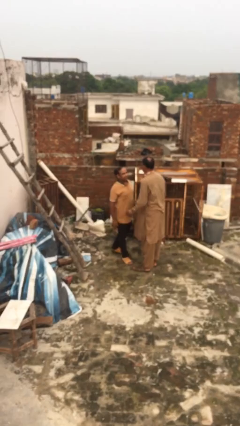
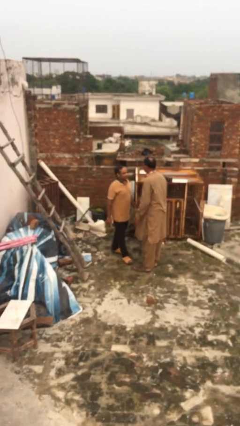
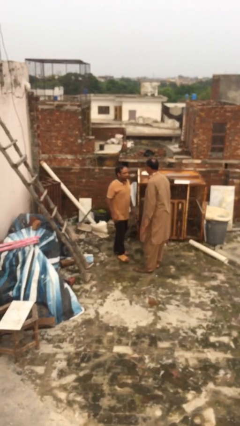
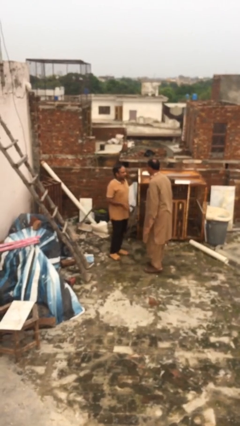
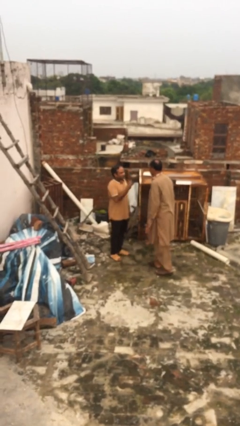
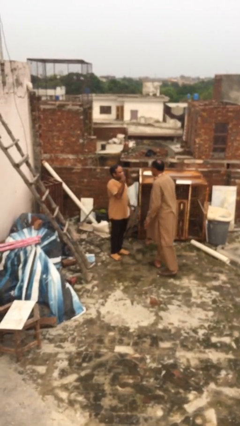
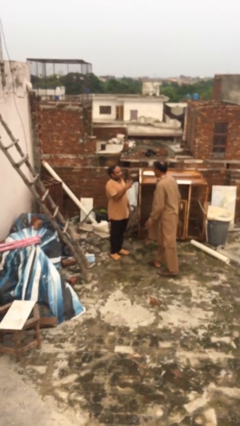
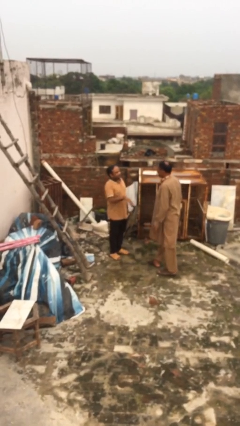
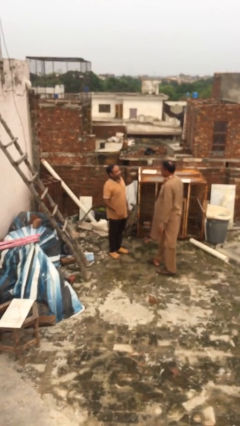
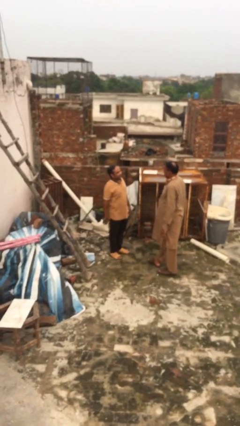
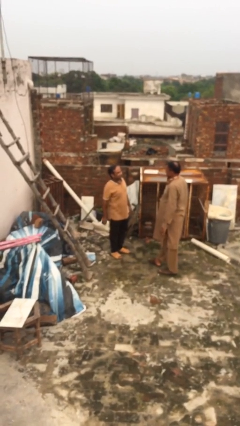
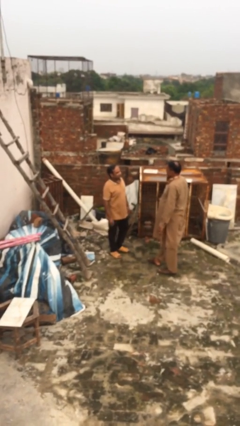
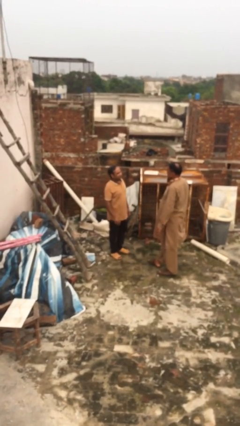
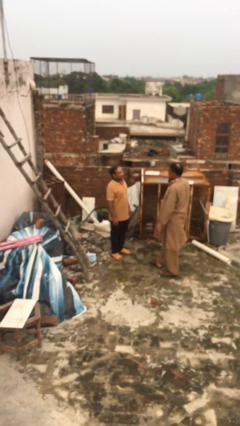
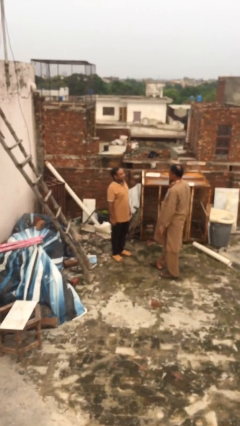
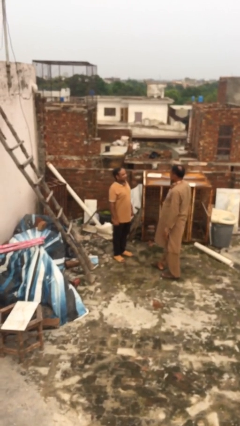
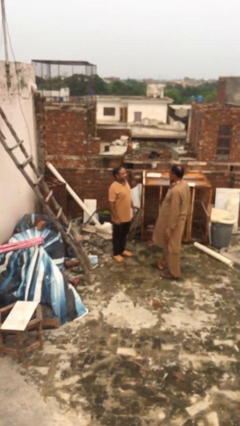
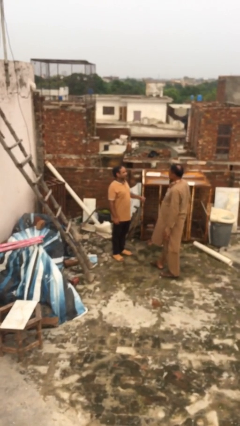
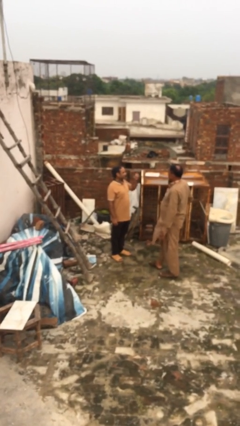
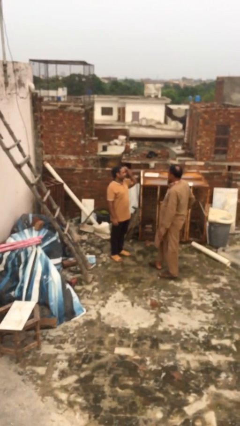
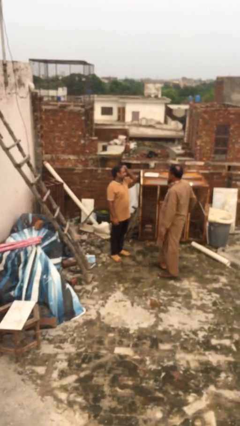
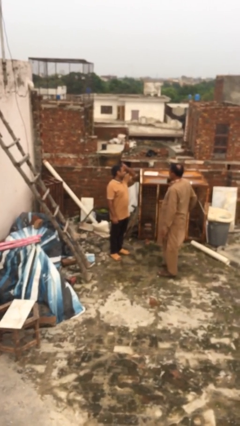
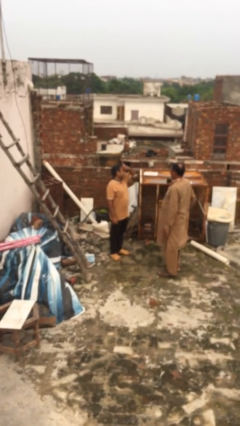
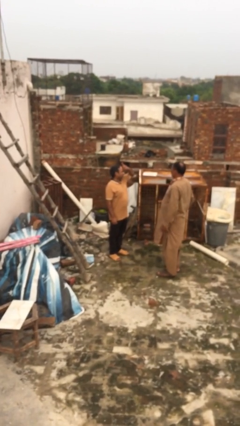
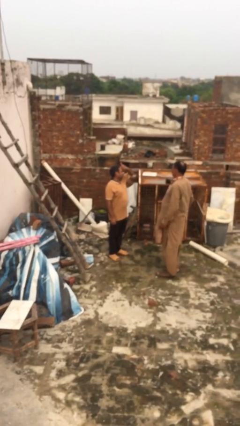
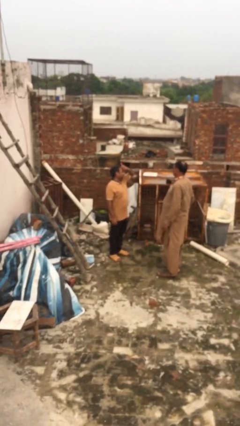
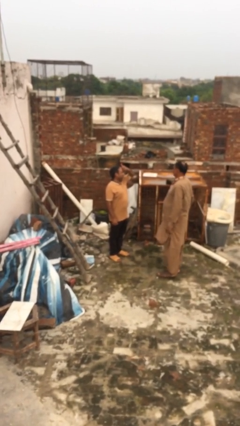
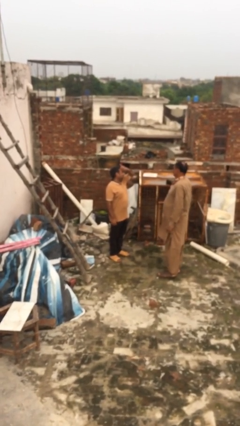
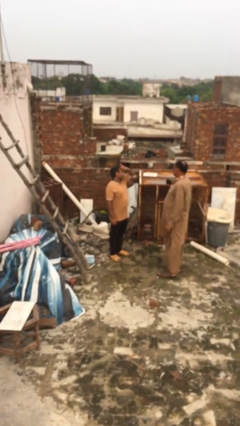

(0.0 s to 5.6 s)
person talks to person

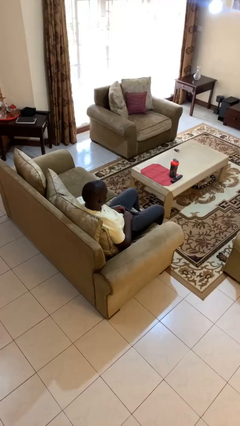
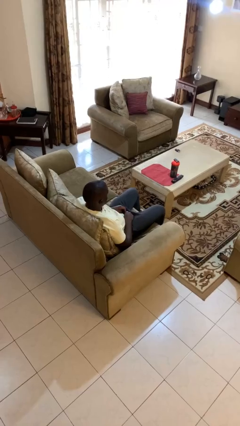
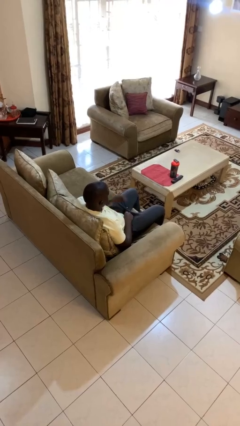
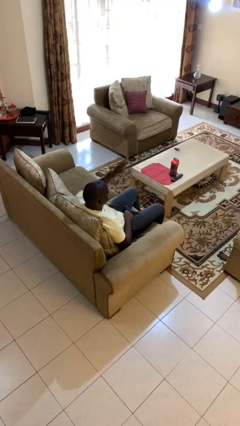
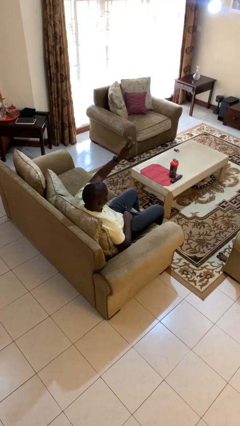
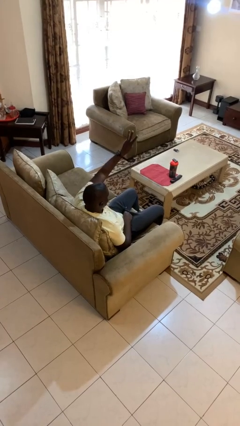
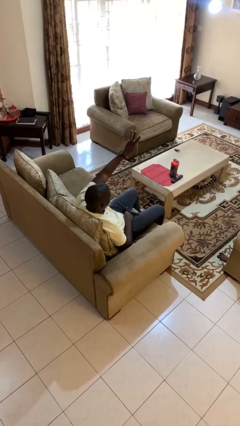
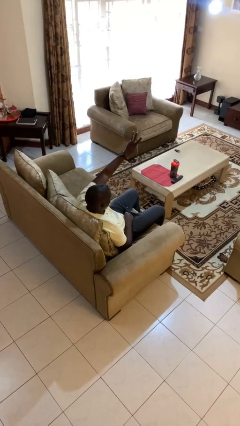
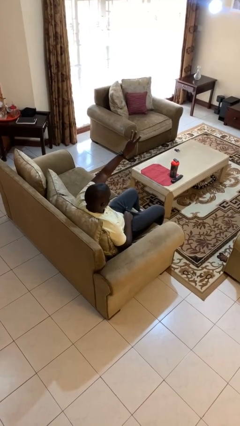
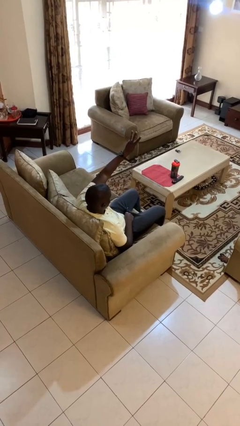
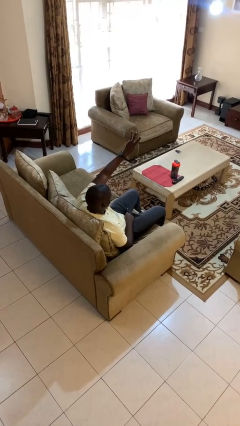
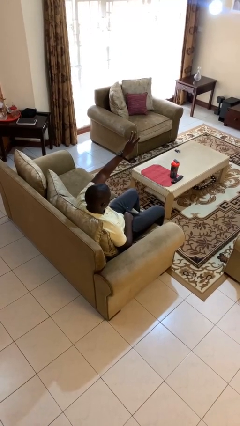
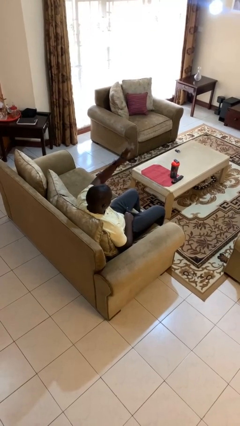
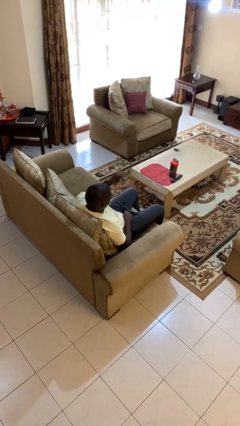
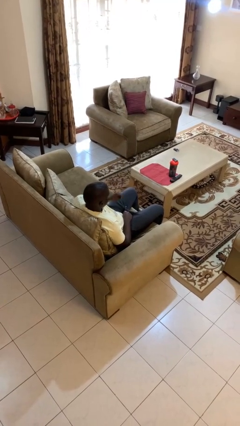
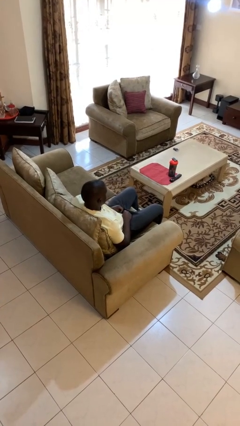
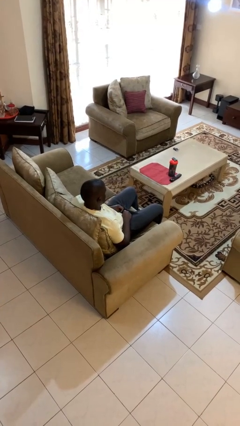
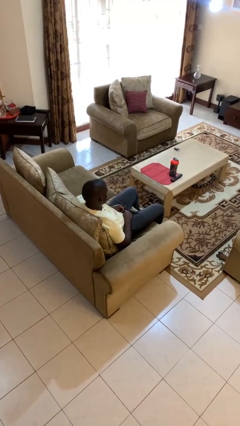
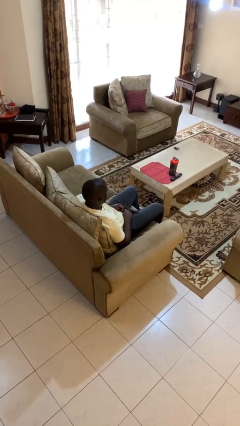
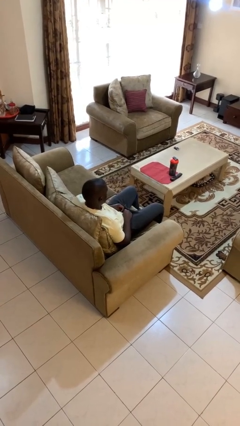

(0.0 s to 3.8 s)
person gestures number three

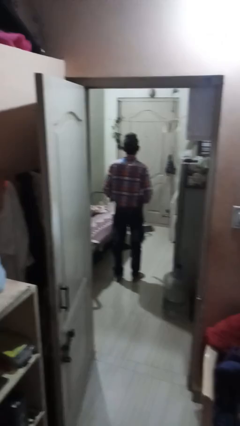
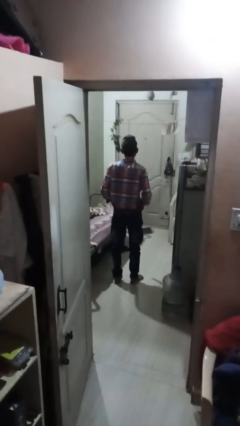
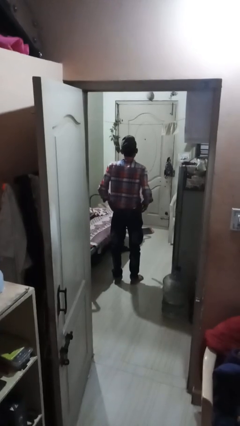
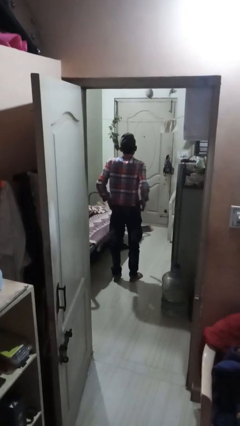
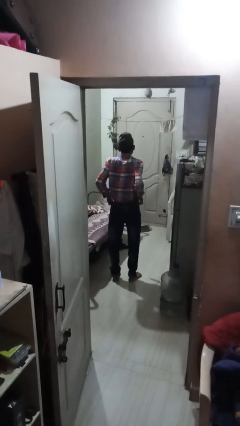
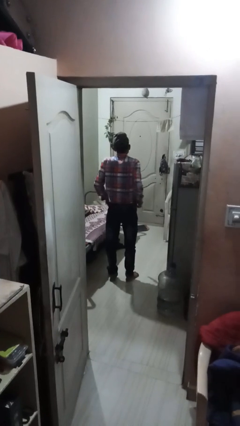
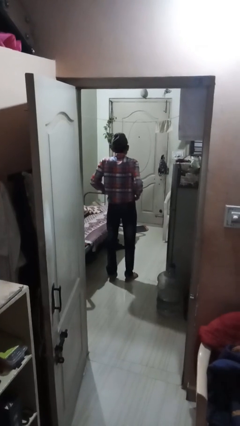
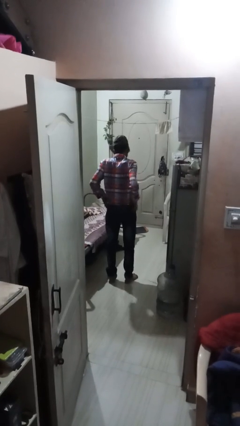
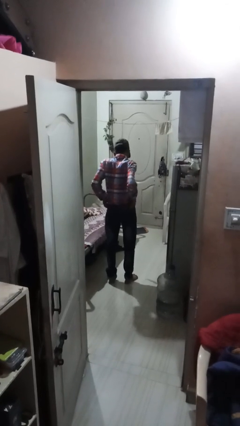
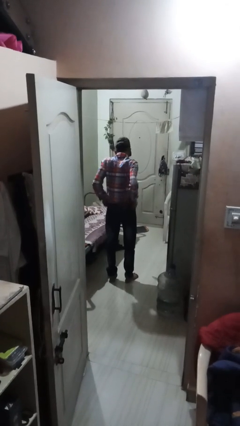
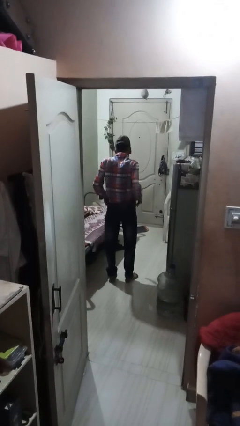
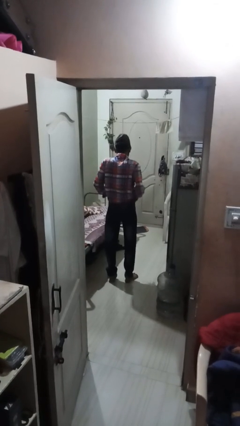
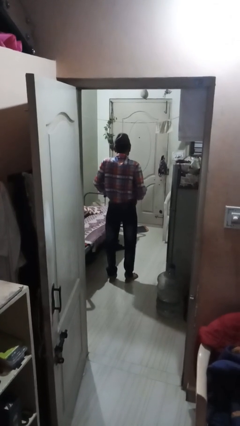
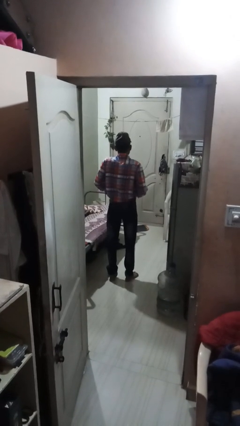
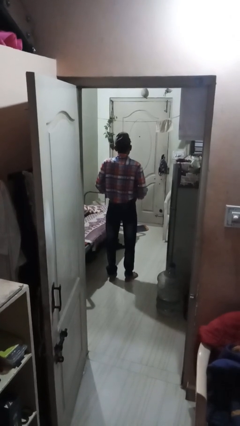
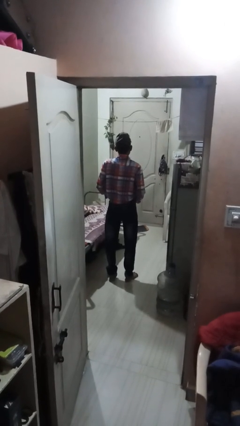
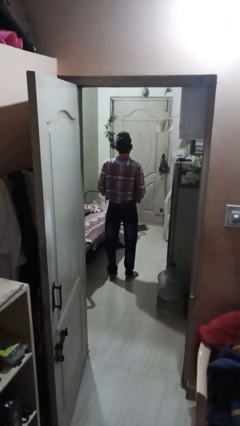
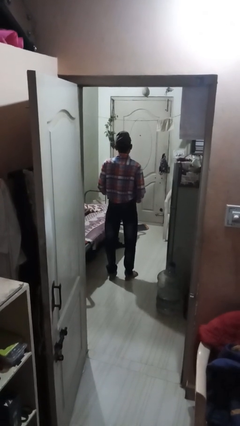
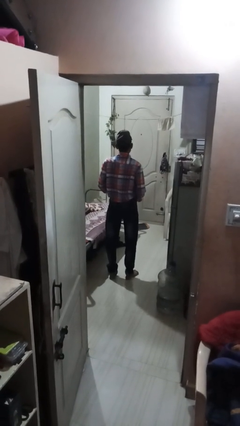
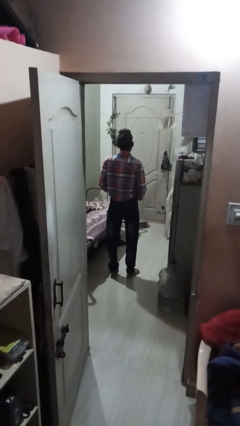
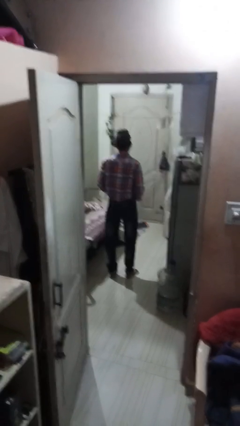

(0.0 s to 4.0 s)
person hikes up pants

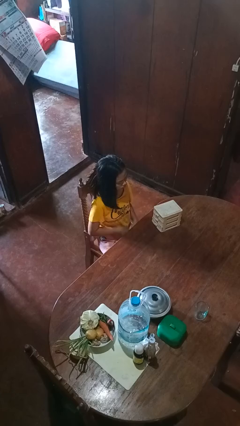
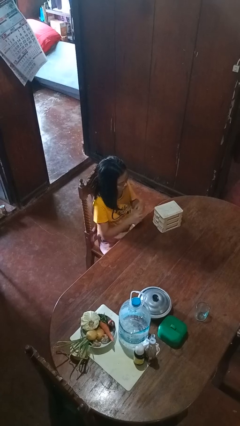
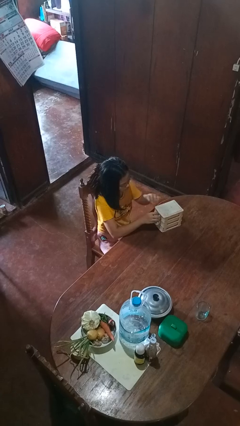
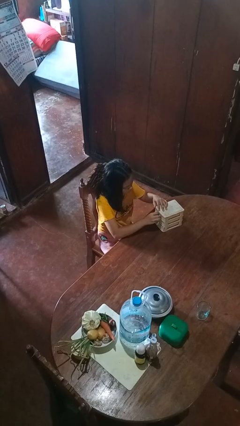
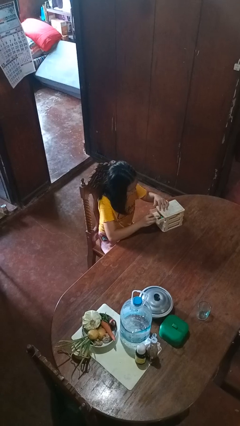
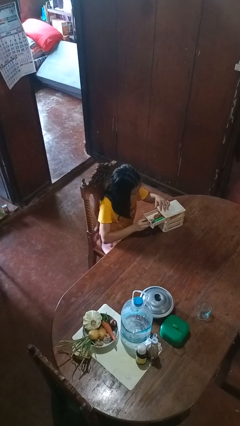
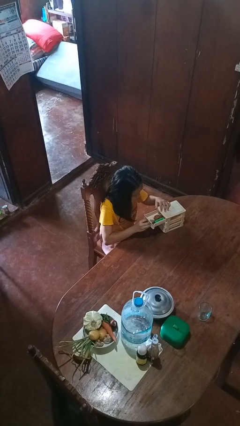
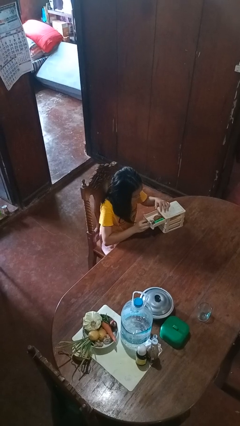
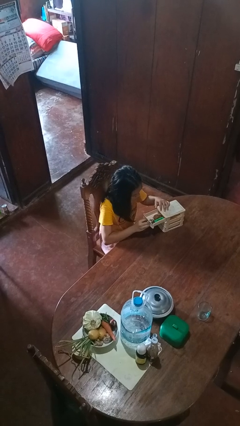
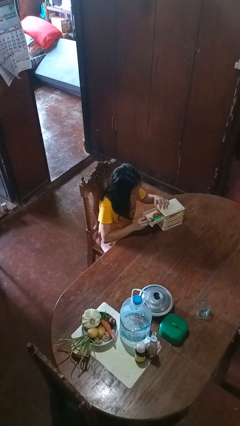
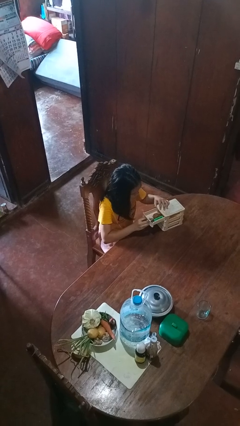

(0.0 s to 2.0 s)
person opens jewelry box

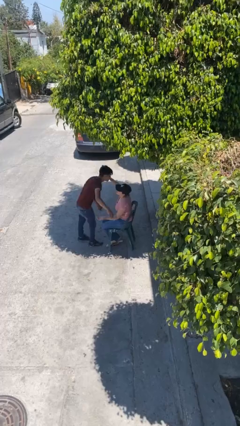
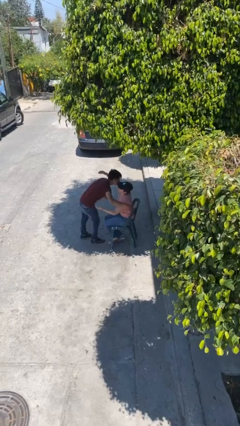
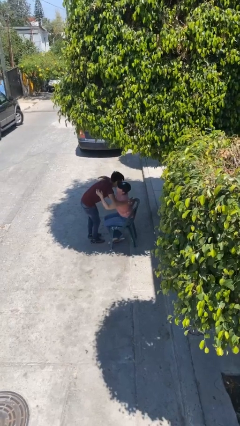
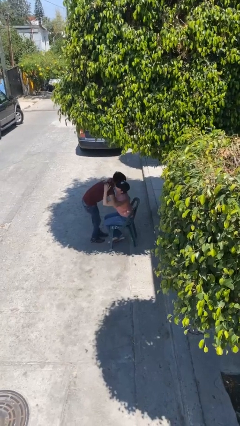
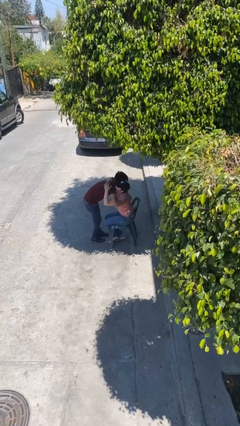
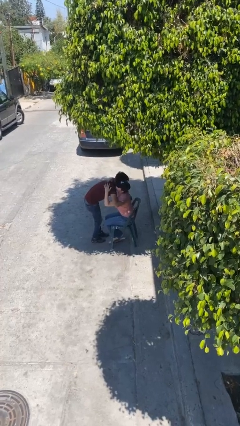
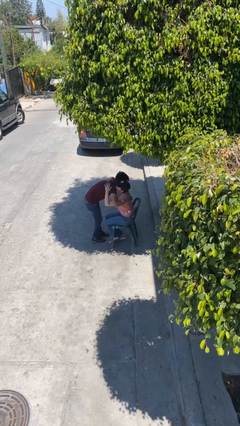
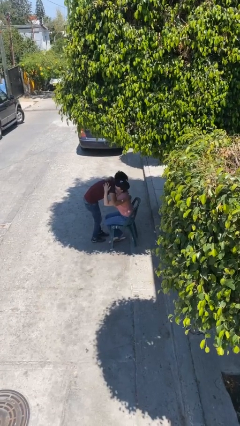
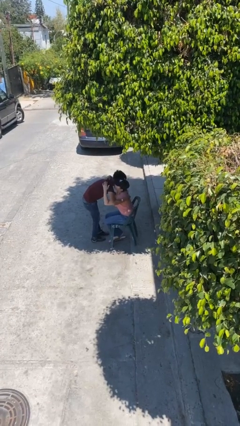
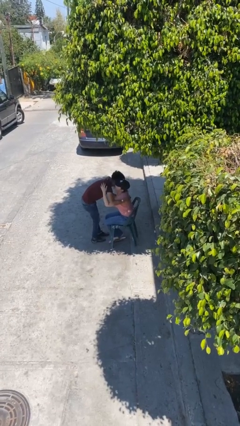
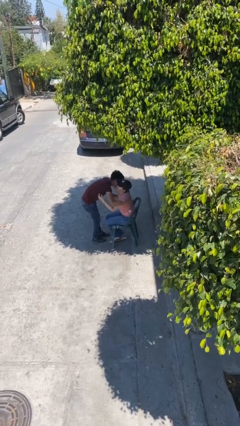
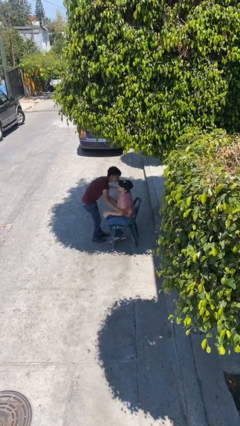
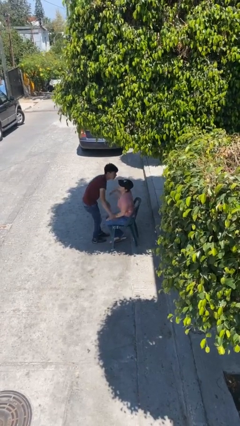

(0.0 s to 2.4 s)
person embraces person
